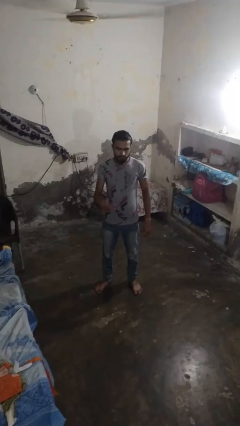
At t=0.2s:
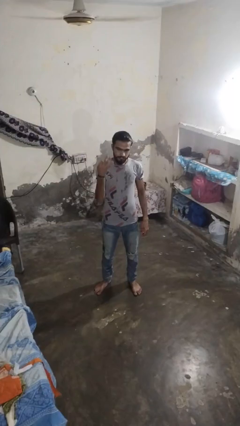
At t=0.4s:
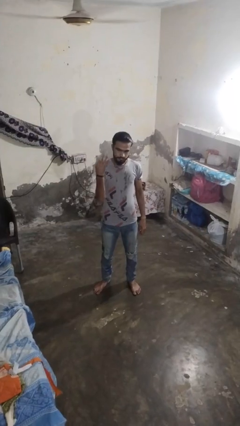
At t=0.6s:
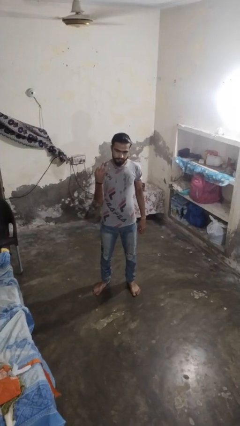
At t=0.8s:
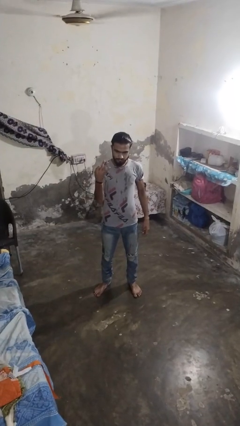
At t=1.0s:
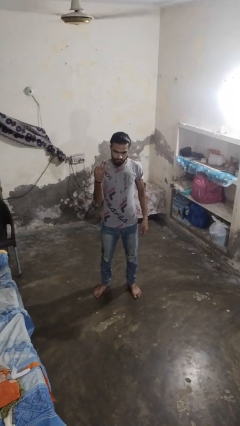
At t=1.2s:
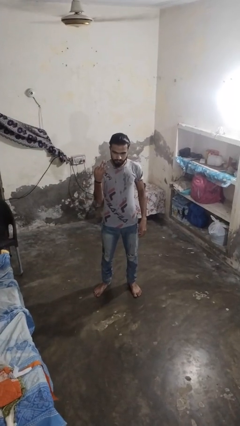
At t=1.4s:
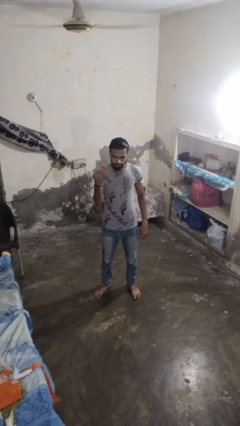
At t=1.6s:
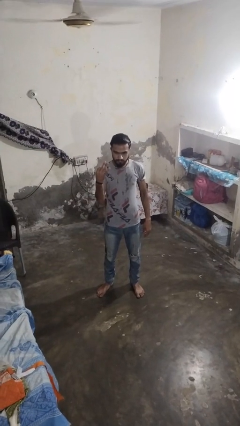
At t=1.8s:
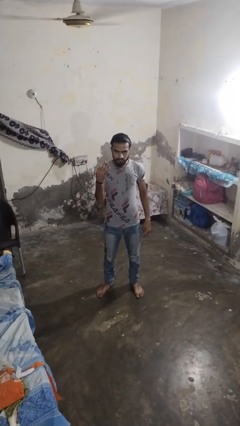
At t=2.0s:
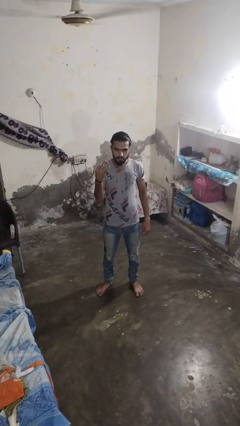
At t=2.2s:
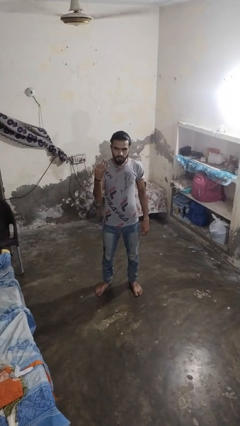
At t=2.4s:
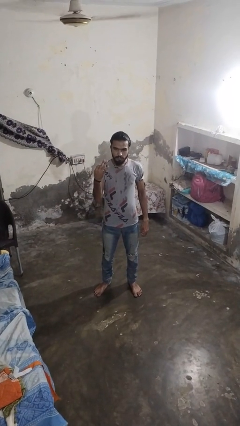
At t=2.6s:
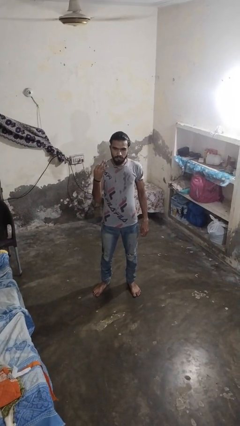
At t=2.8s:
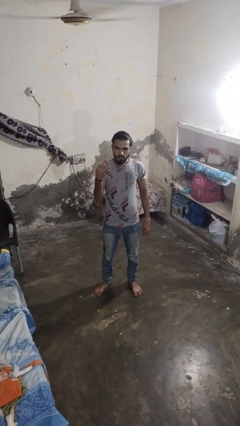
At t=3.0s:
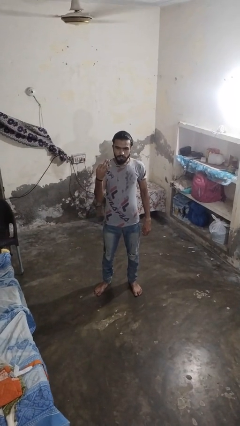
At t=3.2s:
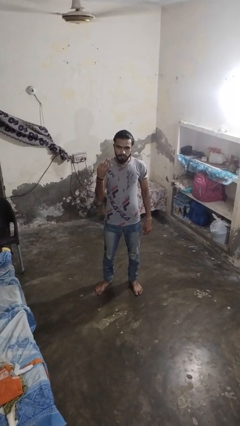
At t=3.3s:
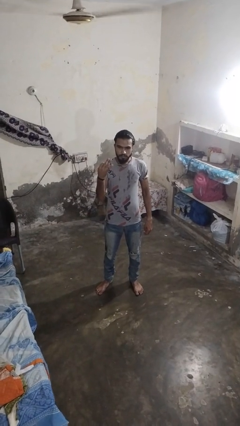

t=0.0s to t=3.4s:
person gestures number three

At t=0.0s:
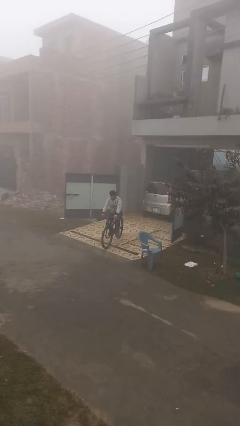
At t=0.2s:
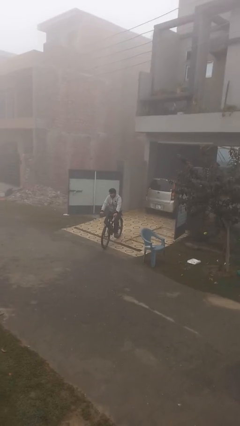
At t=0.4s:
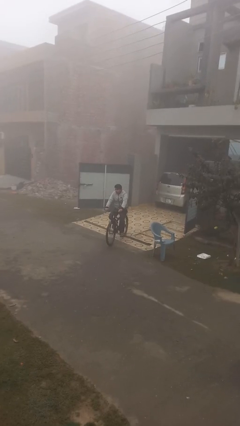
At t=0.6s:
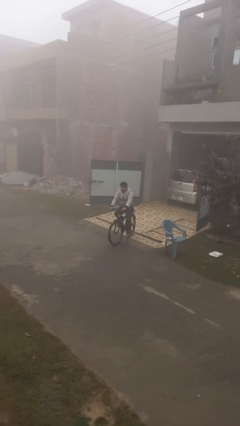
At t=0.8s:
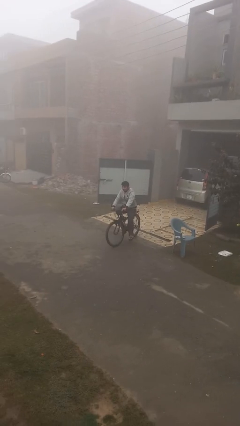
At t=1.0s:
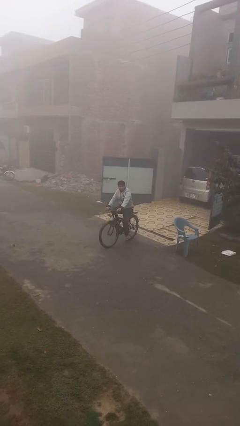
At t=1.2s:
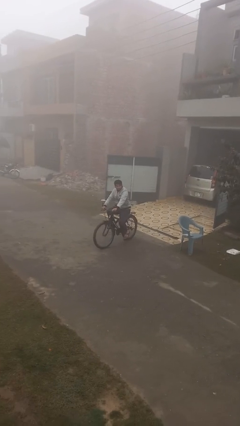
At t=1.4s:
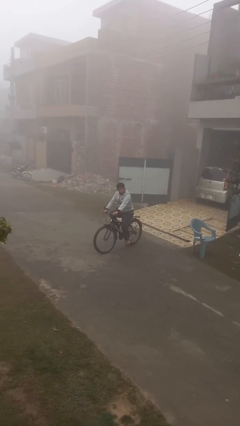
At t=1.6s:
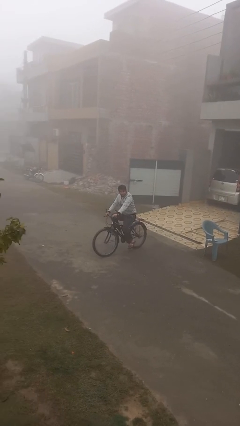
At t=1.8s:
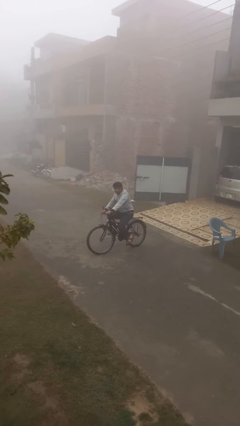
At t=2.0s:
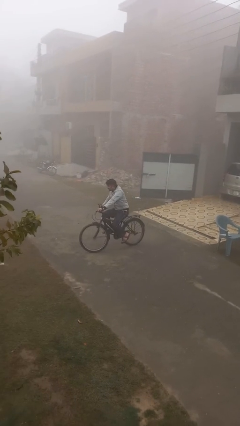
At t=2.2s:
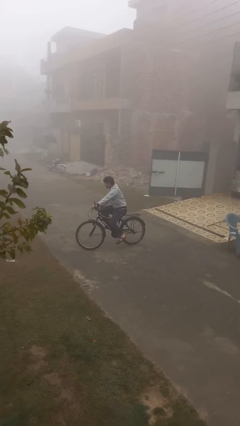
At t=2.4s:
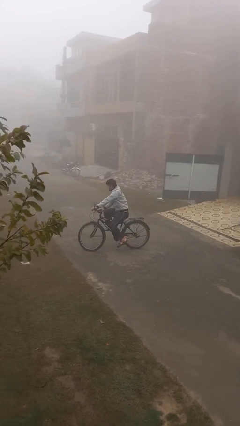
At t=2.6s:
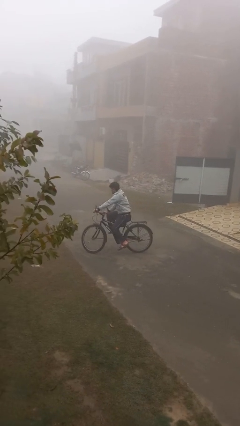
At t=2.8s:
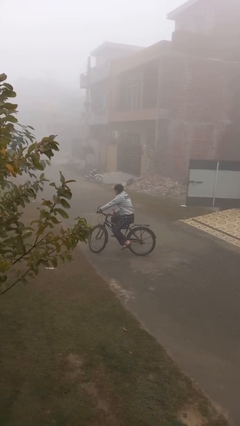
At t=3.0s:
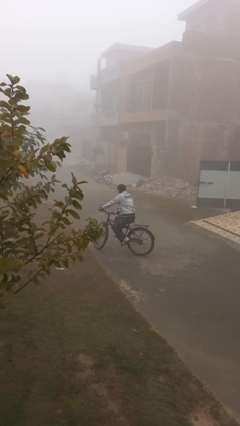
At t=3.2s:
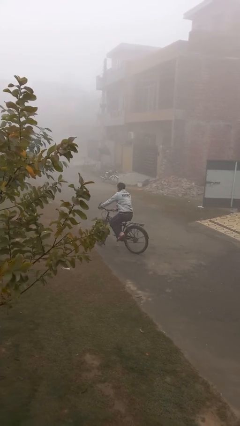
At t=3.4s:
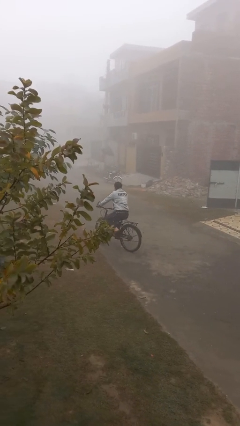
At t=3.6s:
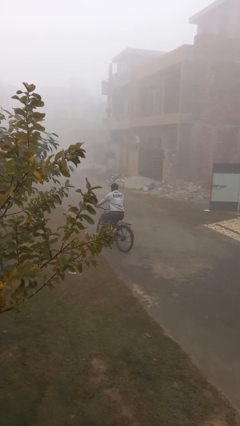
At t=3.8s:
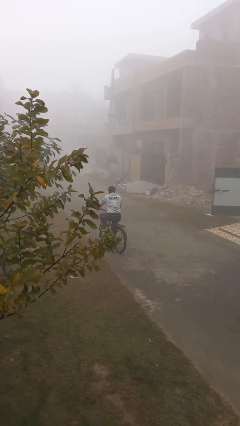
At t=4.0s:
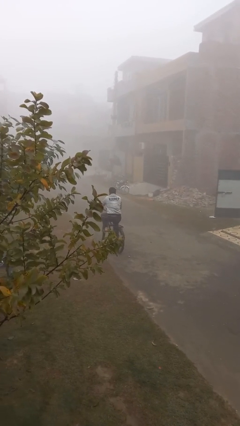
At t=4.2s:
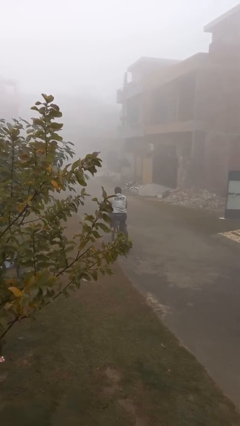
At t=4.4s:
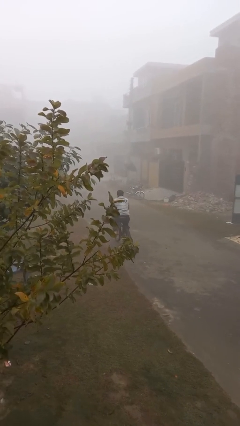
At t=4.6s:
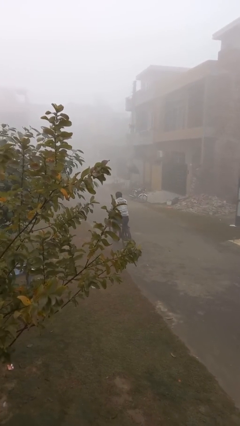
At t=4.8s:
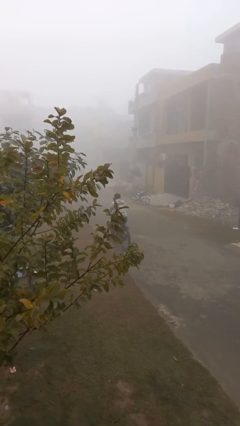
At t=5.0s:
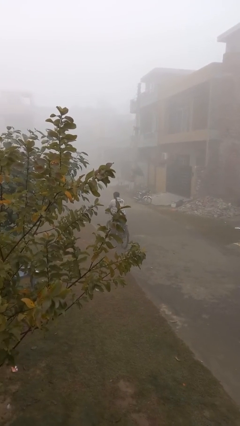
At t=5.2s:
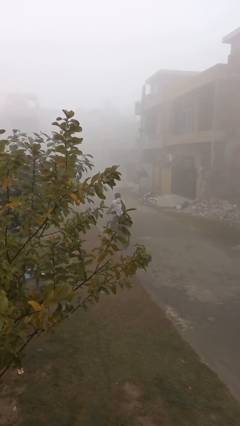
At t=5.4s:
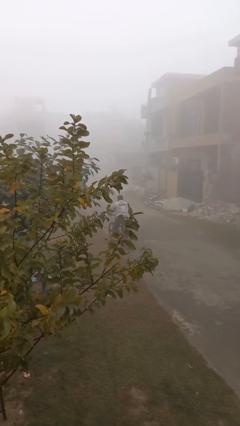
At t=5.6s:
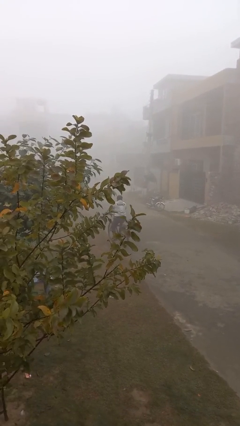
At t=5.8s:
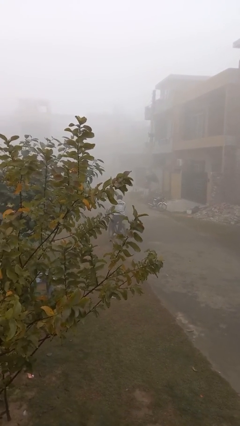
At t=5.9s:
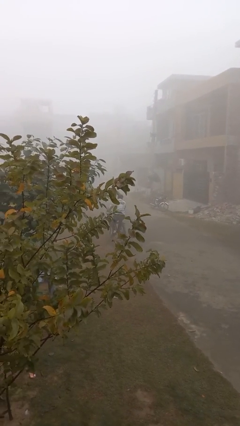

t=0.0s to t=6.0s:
person rides bicycle

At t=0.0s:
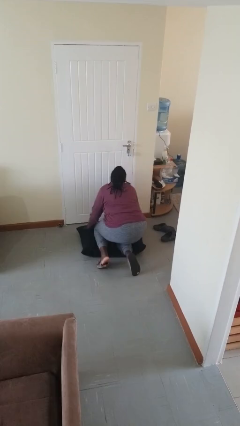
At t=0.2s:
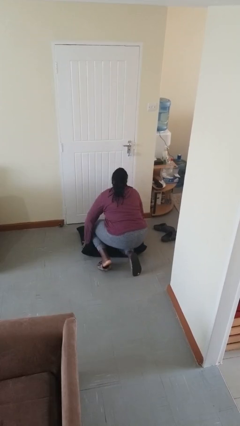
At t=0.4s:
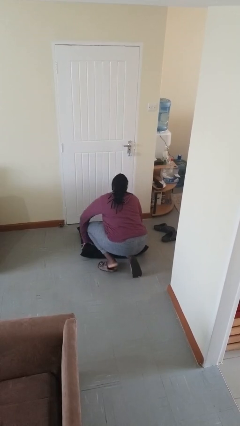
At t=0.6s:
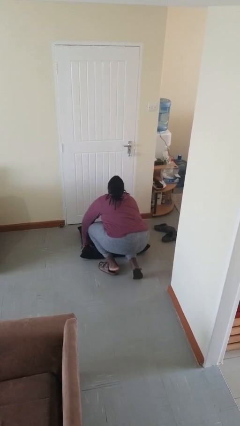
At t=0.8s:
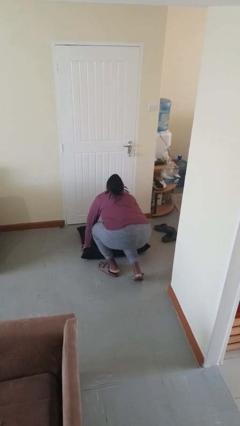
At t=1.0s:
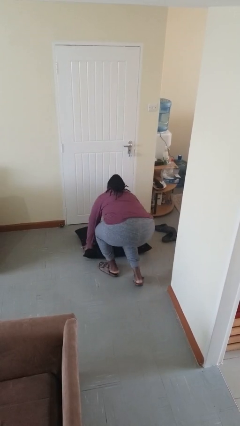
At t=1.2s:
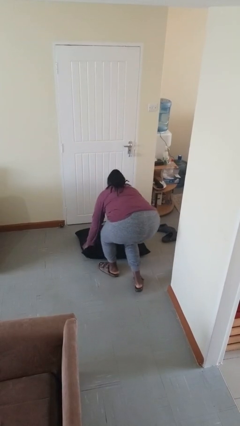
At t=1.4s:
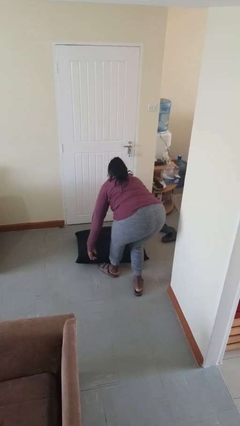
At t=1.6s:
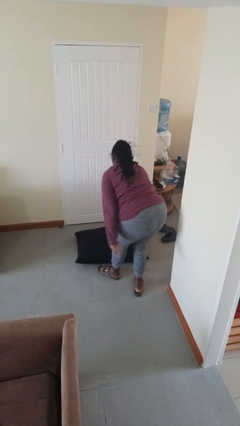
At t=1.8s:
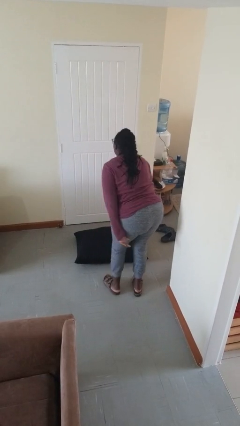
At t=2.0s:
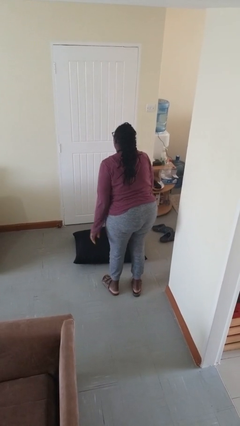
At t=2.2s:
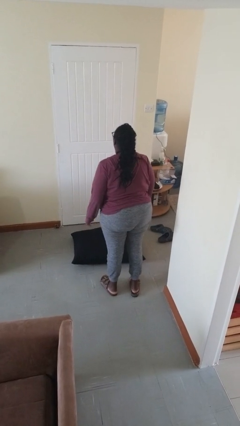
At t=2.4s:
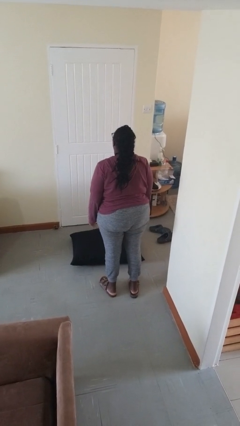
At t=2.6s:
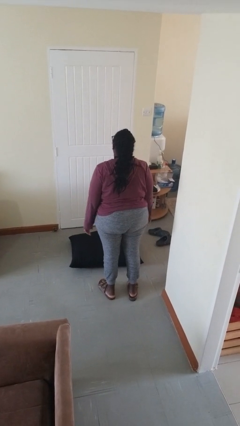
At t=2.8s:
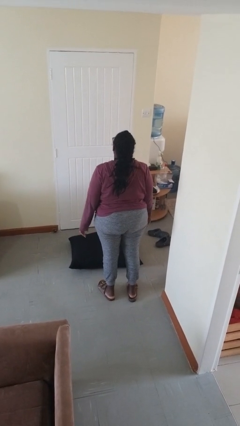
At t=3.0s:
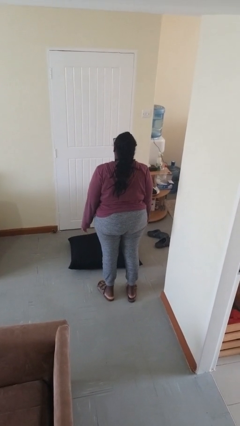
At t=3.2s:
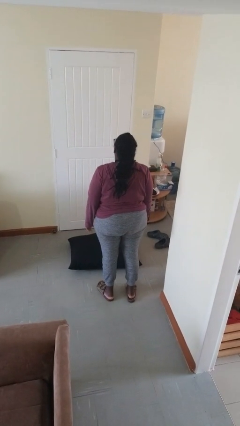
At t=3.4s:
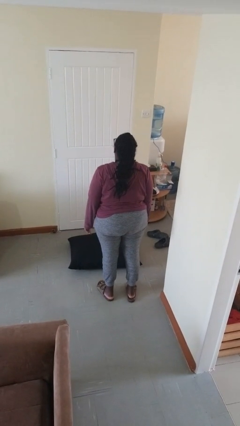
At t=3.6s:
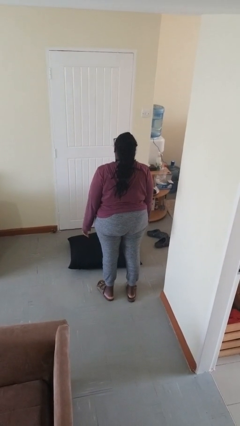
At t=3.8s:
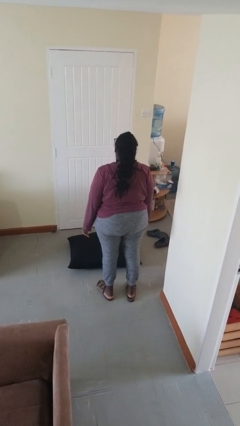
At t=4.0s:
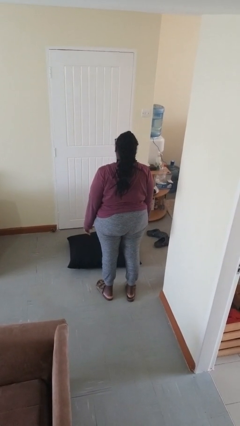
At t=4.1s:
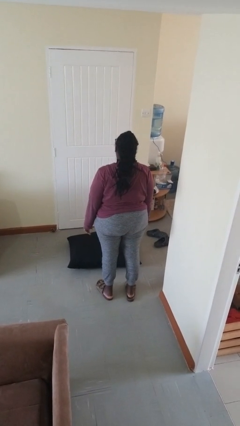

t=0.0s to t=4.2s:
person stands up from floor

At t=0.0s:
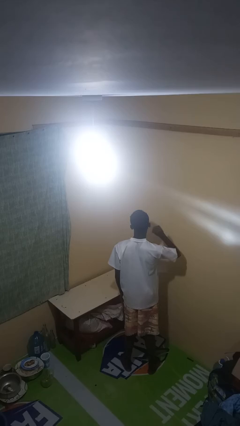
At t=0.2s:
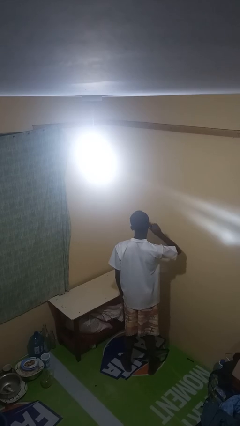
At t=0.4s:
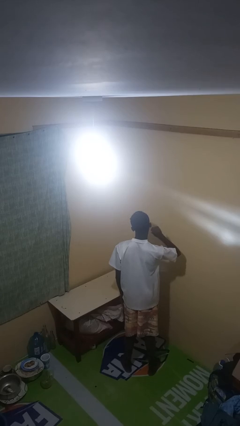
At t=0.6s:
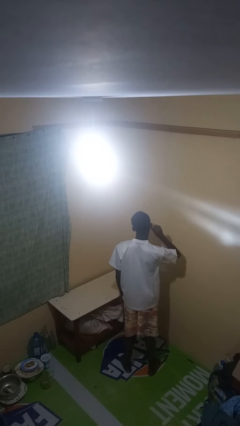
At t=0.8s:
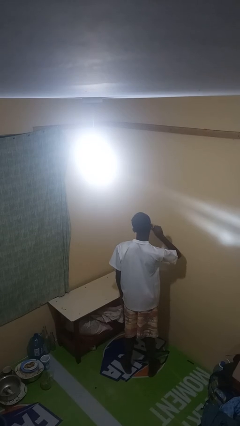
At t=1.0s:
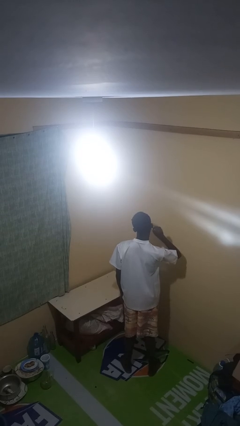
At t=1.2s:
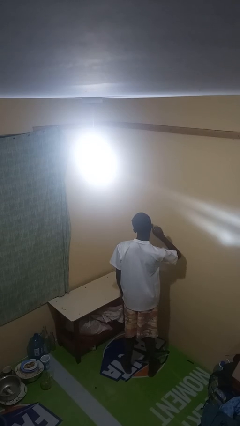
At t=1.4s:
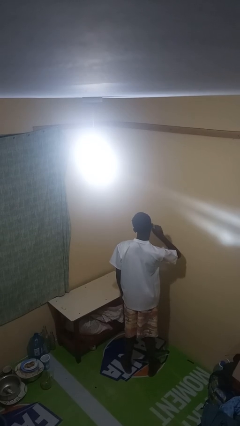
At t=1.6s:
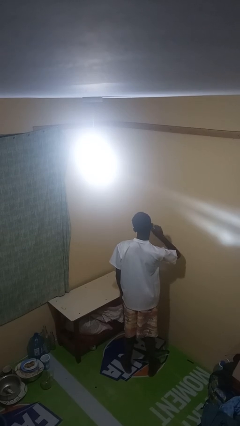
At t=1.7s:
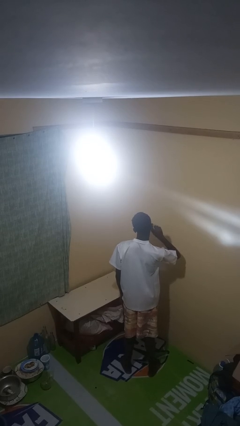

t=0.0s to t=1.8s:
person gestures listen closely

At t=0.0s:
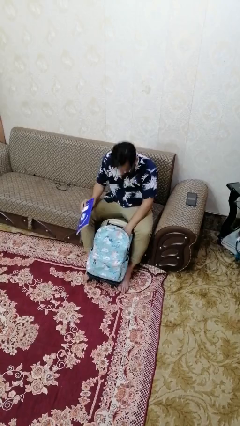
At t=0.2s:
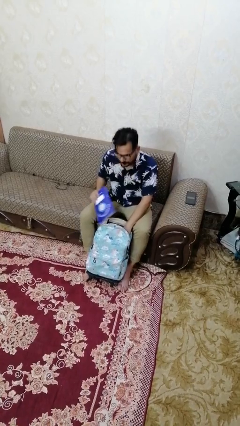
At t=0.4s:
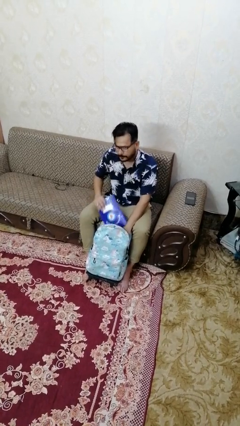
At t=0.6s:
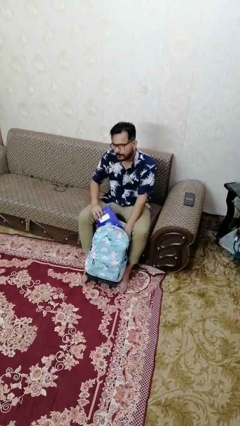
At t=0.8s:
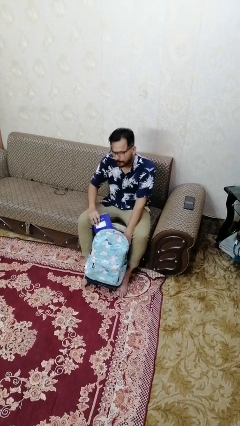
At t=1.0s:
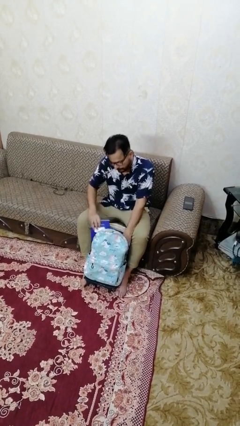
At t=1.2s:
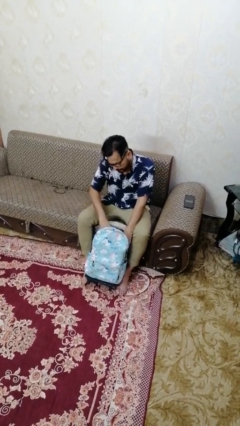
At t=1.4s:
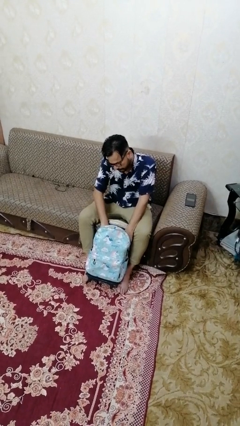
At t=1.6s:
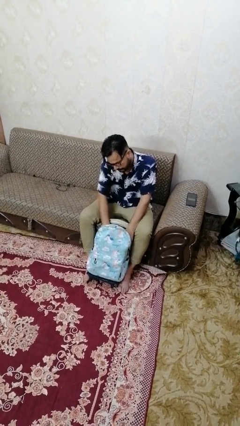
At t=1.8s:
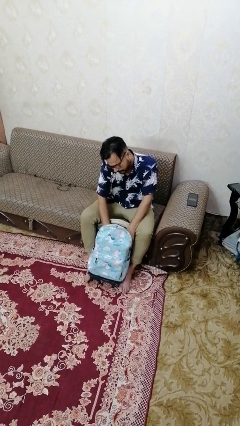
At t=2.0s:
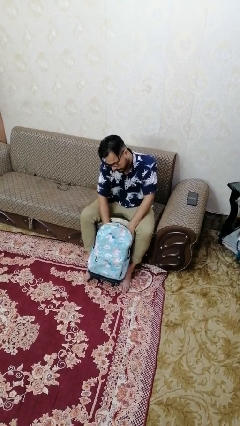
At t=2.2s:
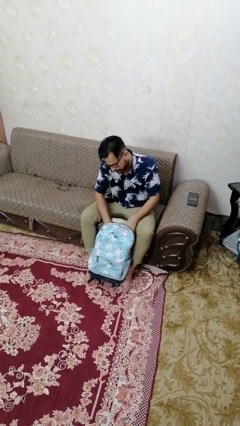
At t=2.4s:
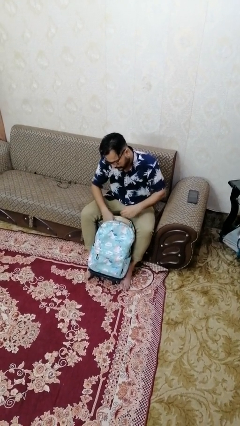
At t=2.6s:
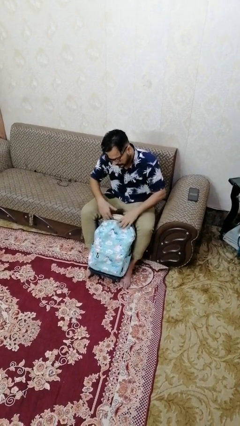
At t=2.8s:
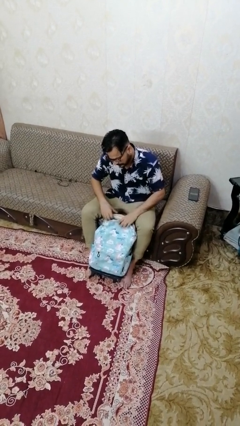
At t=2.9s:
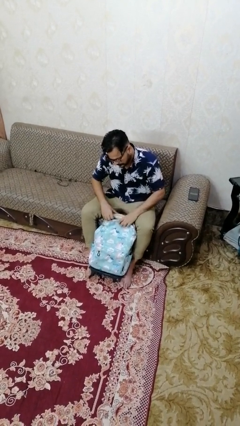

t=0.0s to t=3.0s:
person puts object into backpack
